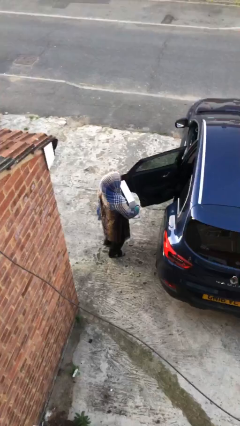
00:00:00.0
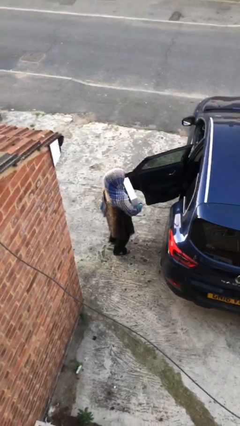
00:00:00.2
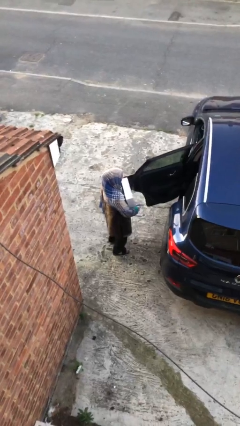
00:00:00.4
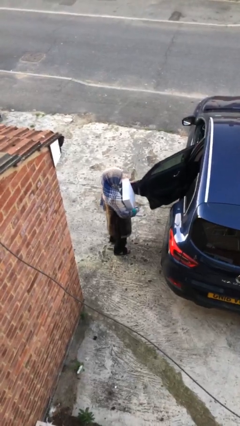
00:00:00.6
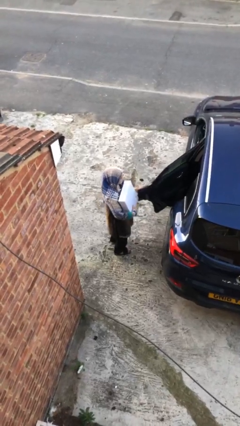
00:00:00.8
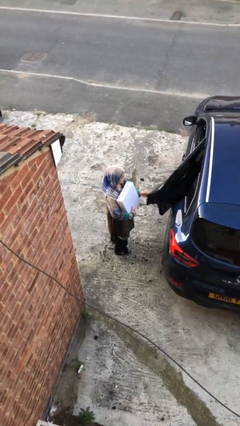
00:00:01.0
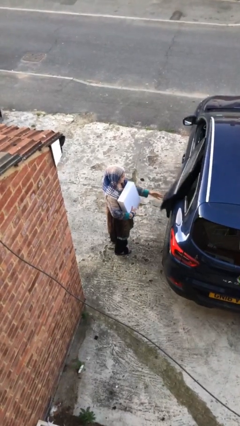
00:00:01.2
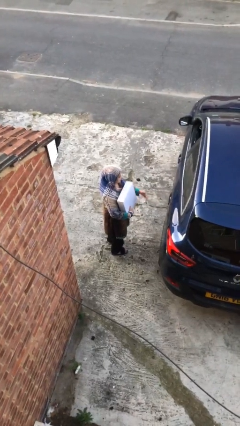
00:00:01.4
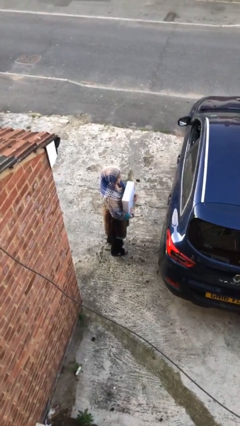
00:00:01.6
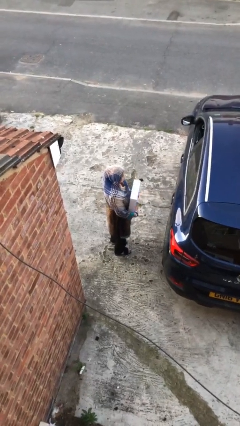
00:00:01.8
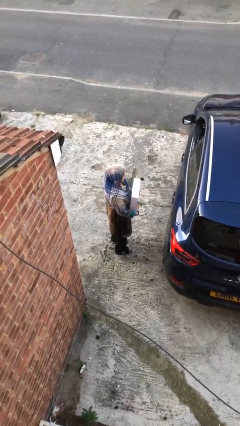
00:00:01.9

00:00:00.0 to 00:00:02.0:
person closes car door

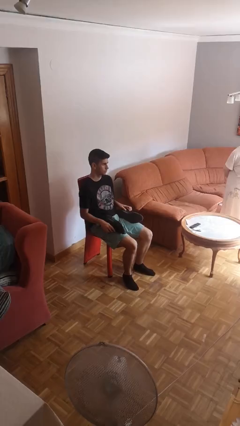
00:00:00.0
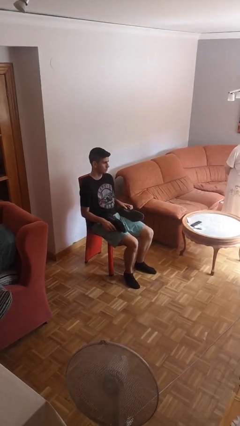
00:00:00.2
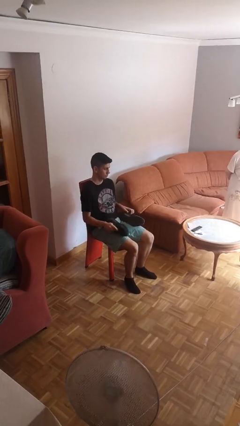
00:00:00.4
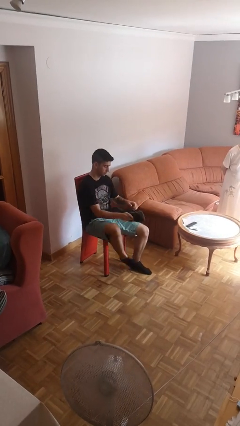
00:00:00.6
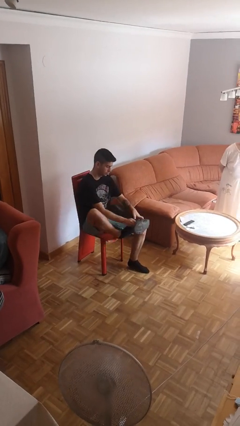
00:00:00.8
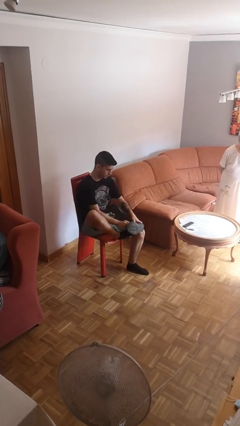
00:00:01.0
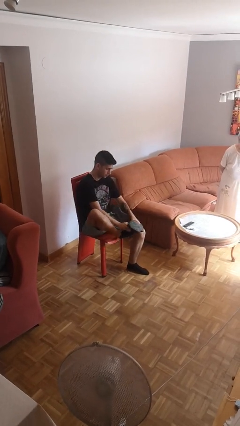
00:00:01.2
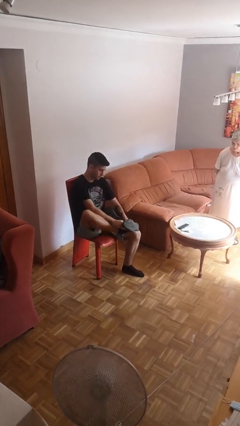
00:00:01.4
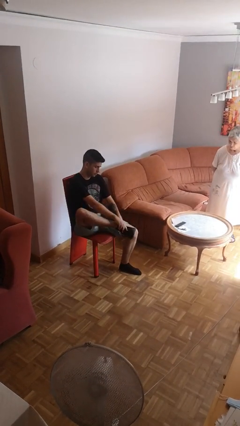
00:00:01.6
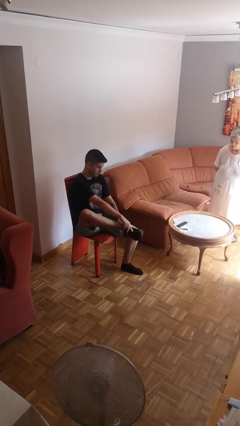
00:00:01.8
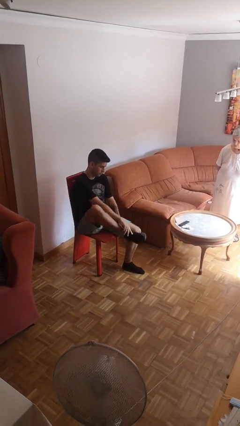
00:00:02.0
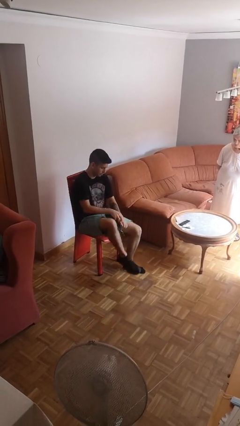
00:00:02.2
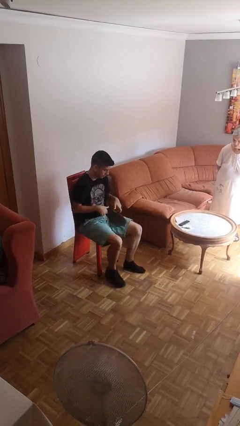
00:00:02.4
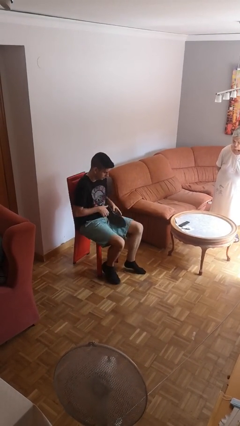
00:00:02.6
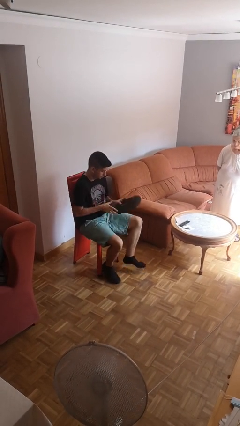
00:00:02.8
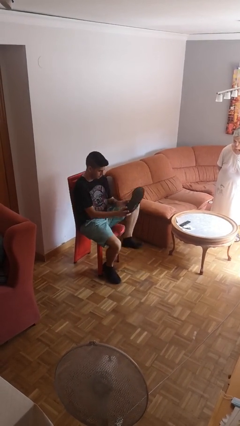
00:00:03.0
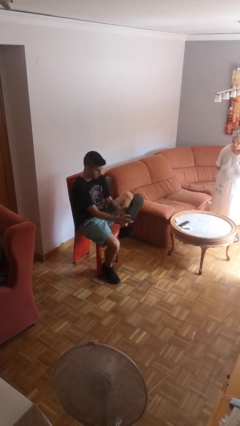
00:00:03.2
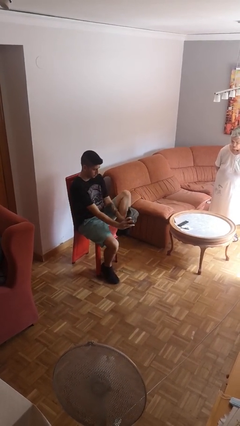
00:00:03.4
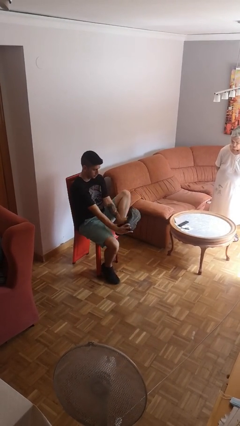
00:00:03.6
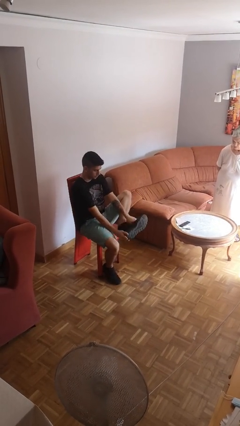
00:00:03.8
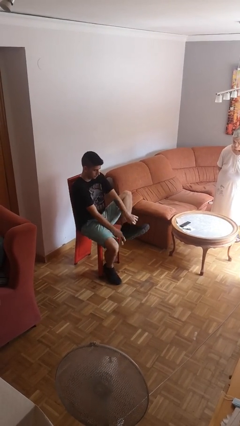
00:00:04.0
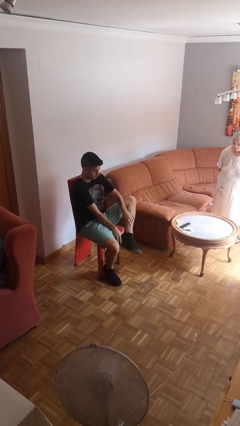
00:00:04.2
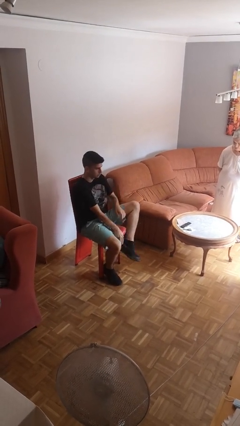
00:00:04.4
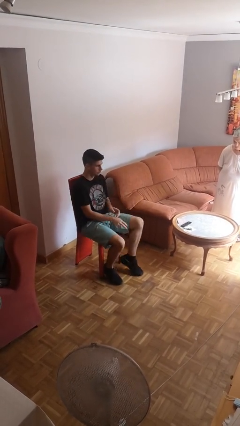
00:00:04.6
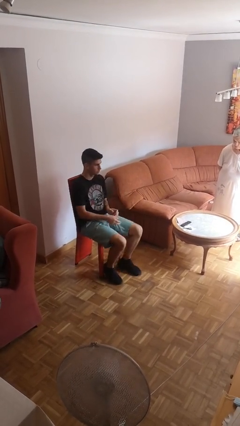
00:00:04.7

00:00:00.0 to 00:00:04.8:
person puts on shoes

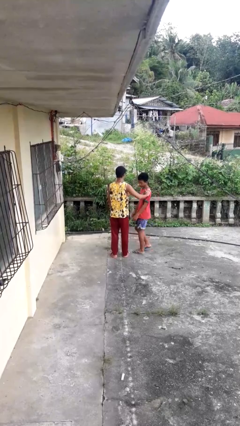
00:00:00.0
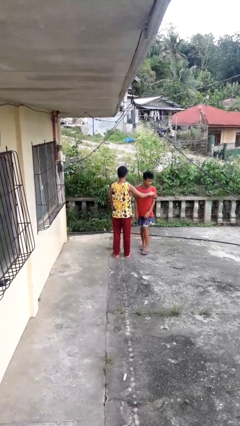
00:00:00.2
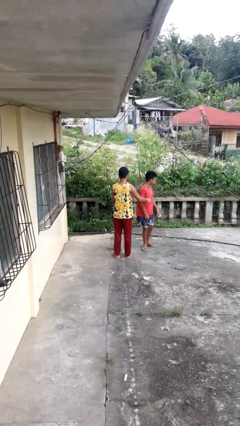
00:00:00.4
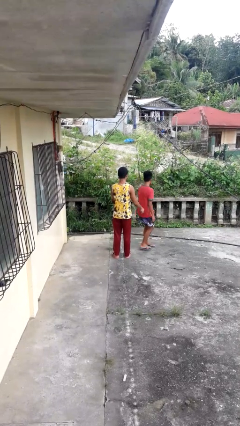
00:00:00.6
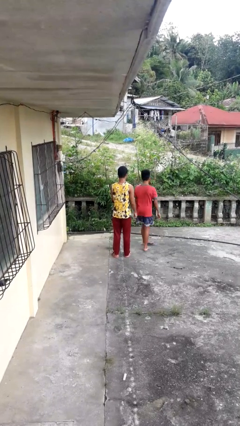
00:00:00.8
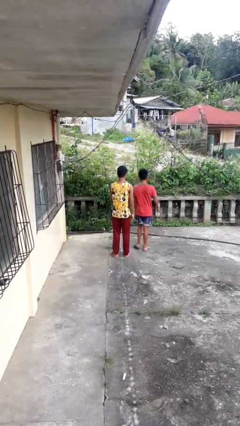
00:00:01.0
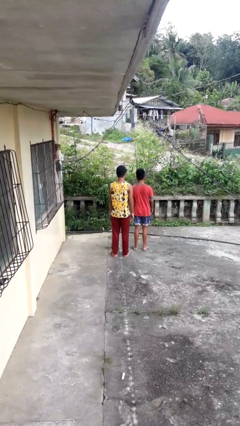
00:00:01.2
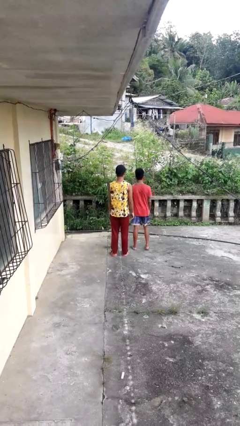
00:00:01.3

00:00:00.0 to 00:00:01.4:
person spins person around

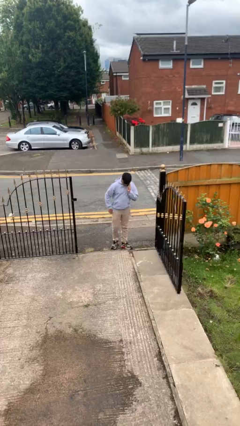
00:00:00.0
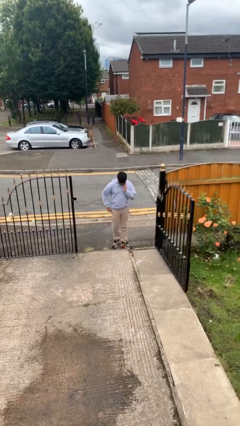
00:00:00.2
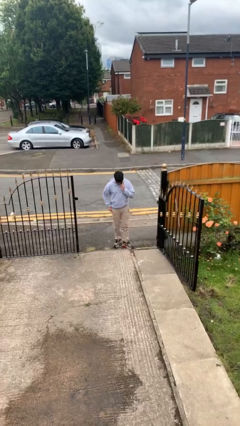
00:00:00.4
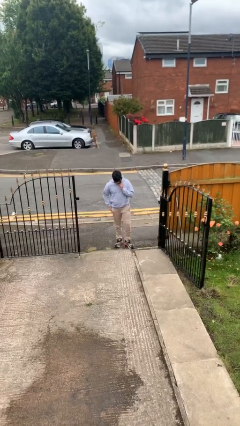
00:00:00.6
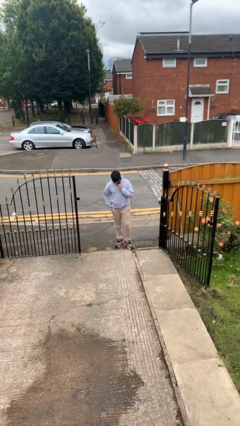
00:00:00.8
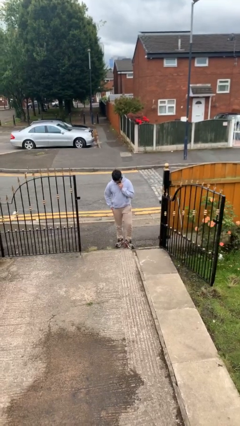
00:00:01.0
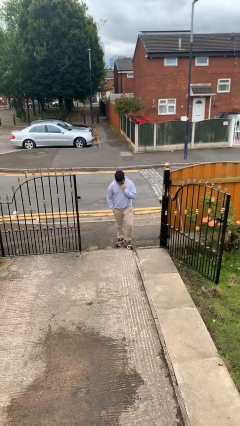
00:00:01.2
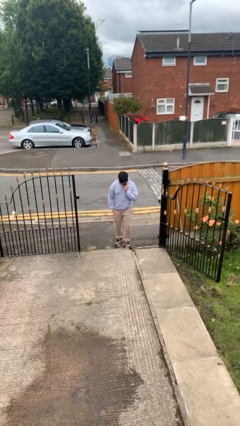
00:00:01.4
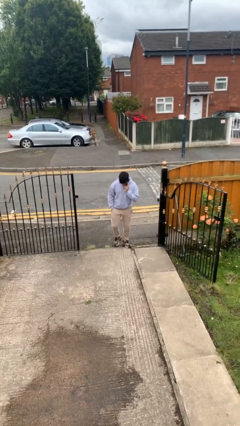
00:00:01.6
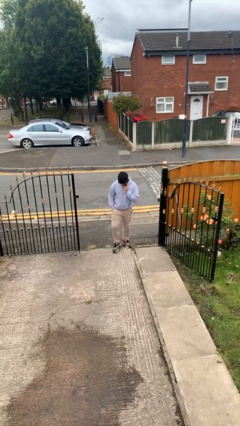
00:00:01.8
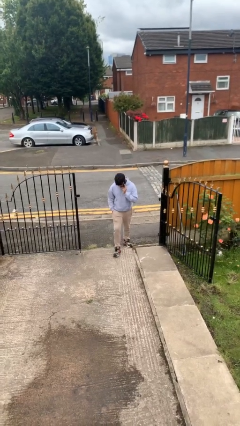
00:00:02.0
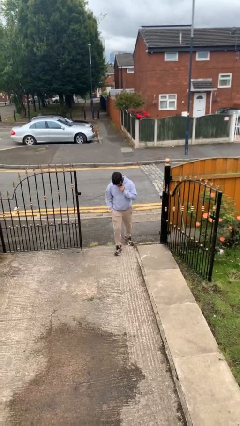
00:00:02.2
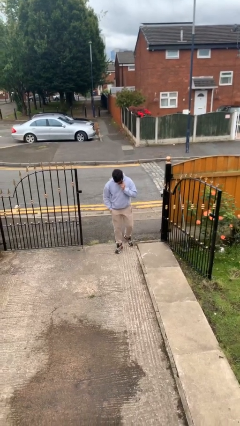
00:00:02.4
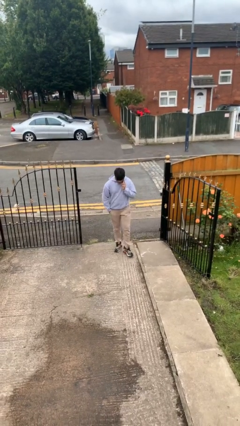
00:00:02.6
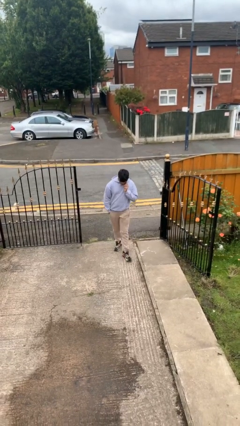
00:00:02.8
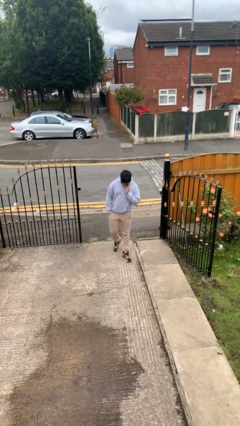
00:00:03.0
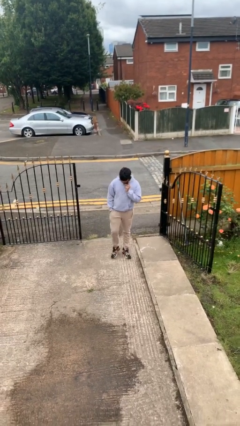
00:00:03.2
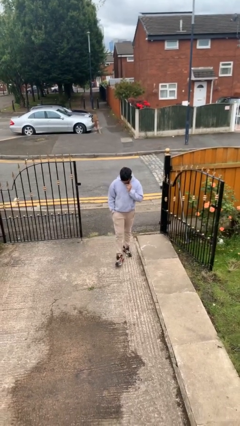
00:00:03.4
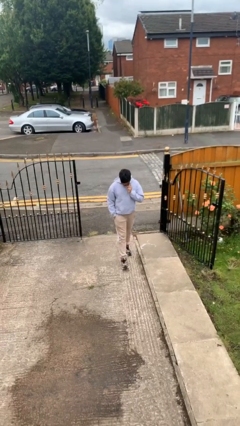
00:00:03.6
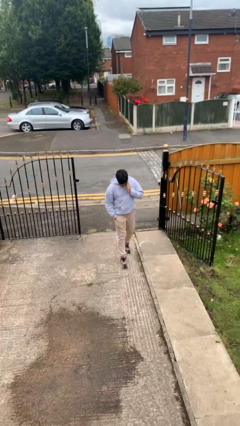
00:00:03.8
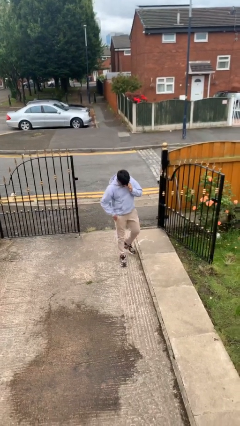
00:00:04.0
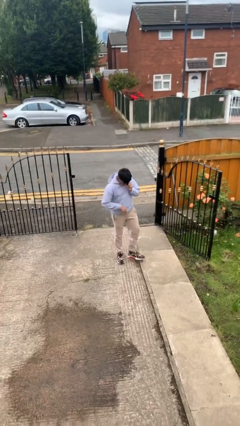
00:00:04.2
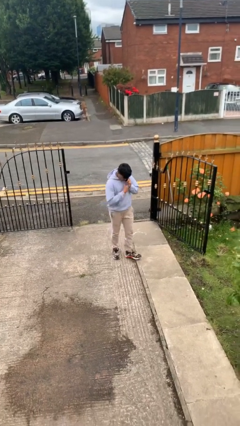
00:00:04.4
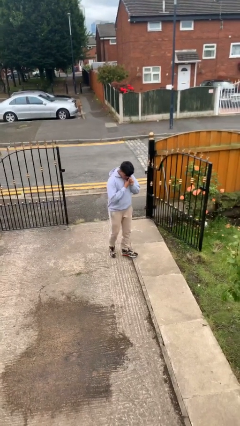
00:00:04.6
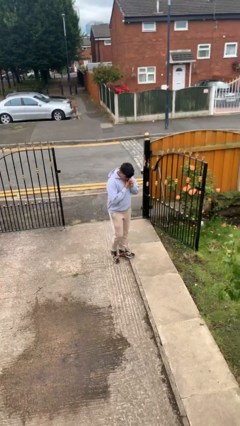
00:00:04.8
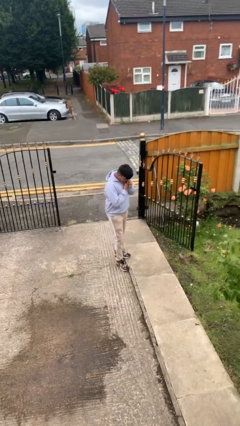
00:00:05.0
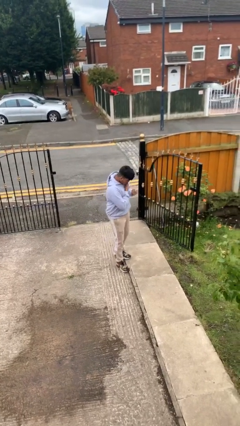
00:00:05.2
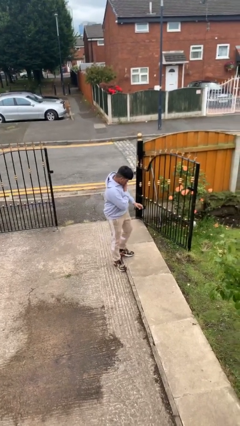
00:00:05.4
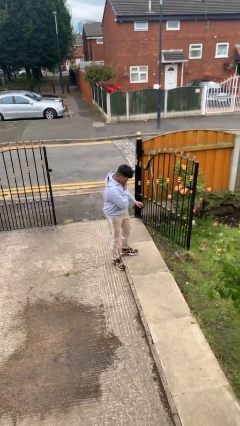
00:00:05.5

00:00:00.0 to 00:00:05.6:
person enters scene through structure

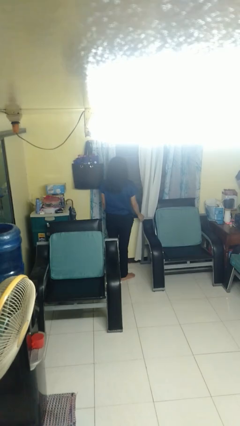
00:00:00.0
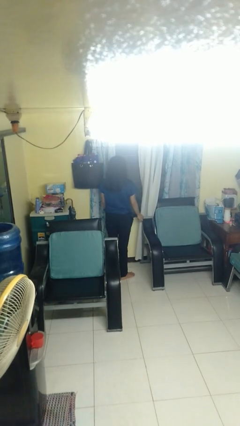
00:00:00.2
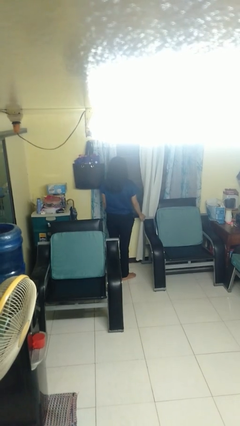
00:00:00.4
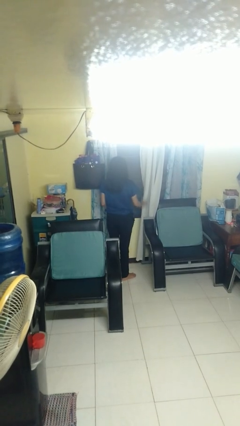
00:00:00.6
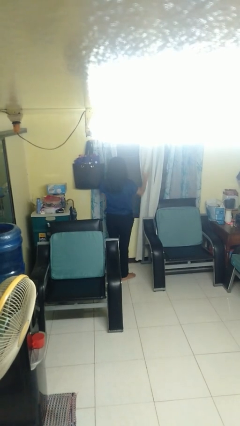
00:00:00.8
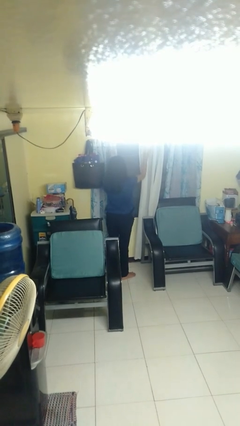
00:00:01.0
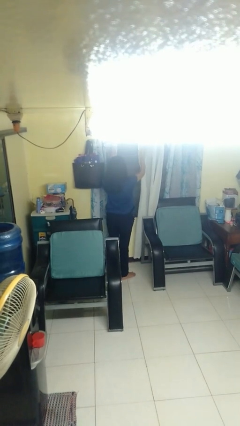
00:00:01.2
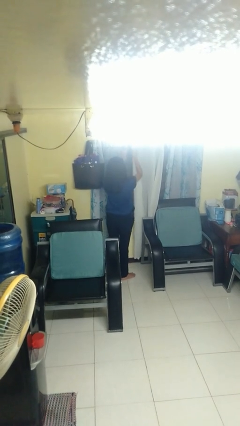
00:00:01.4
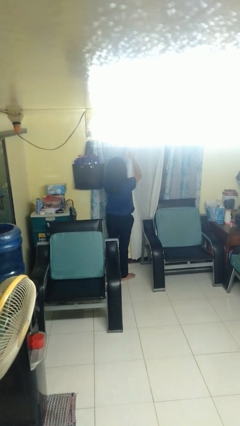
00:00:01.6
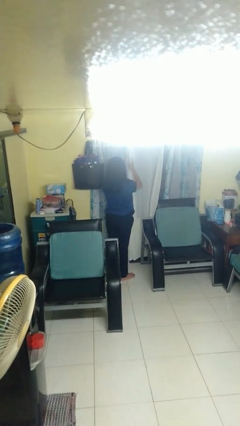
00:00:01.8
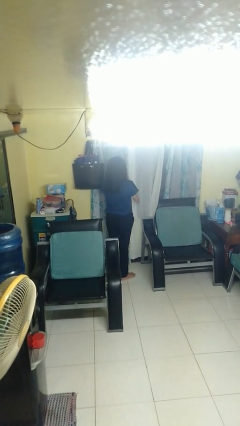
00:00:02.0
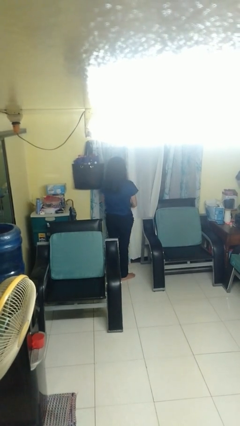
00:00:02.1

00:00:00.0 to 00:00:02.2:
person closes curtains

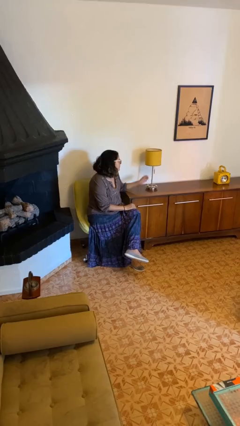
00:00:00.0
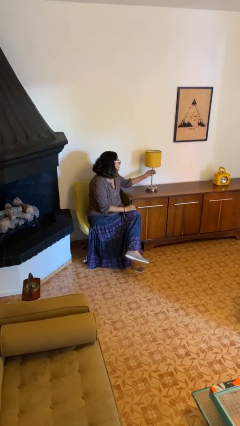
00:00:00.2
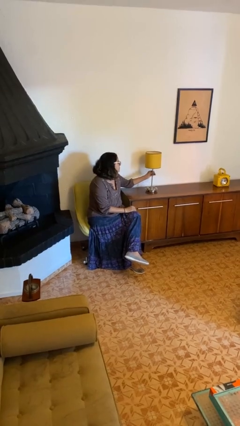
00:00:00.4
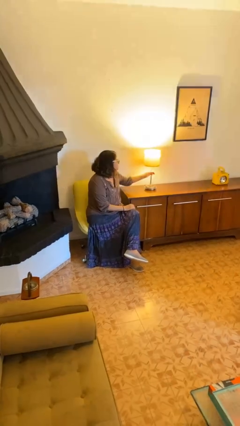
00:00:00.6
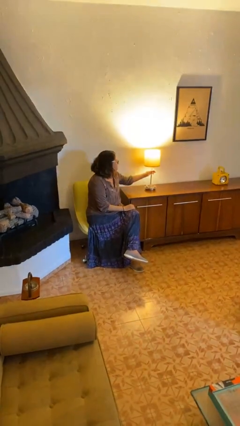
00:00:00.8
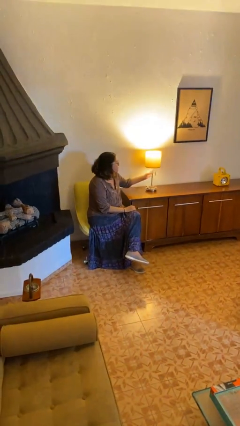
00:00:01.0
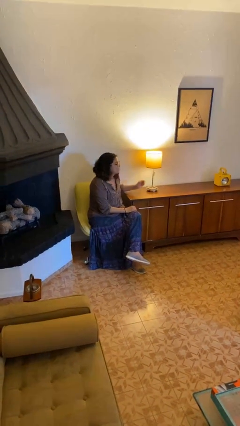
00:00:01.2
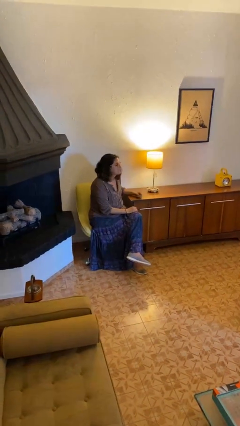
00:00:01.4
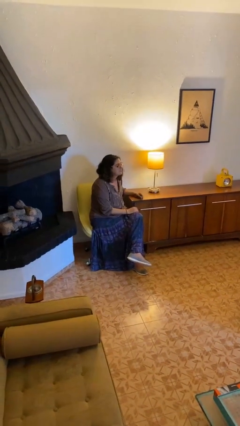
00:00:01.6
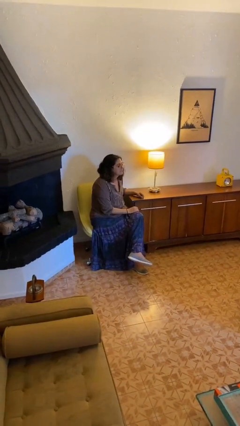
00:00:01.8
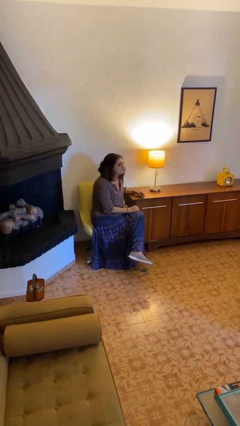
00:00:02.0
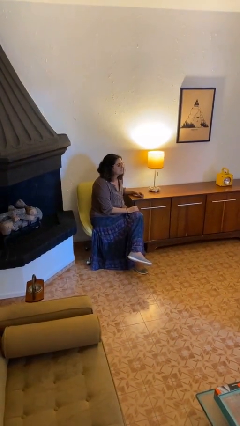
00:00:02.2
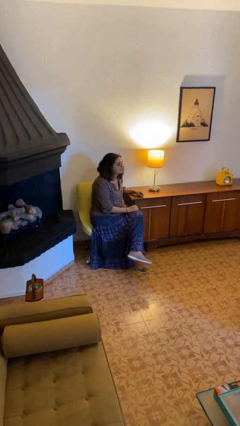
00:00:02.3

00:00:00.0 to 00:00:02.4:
person turns on lamp
